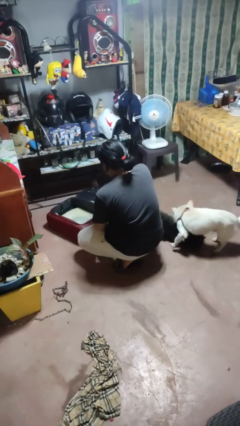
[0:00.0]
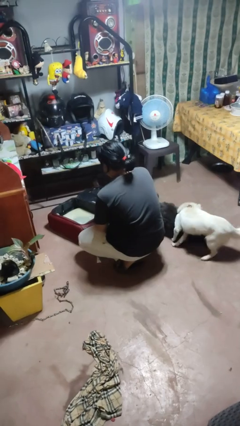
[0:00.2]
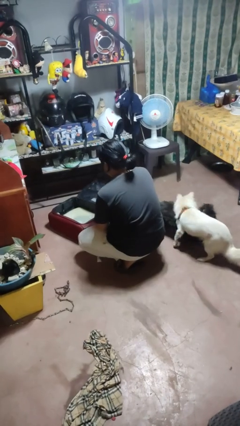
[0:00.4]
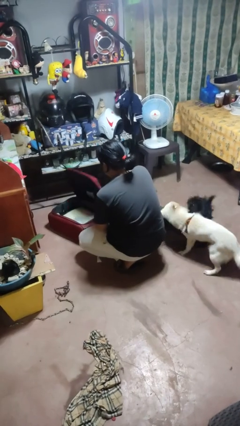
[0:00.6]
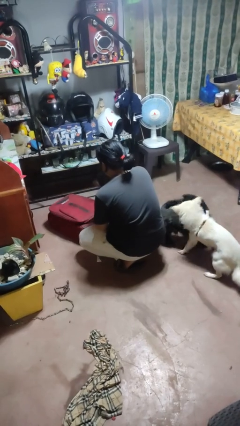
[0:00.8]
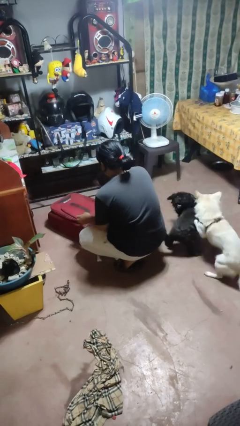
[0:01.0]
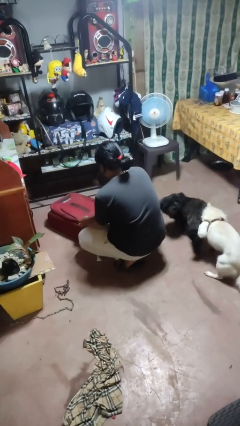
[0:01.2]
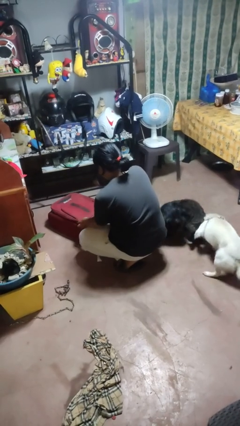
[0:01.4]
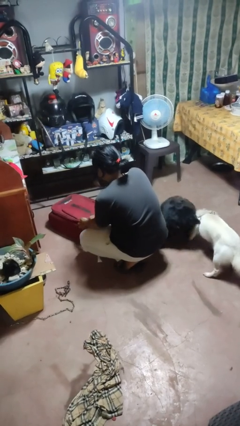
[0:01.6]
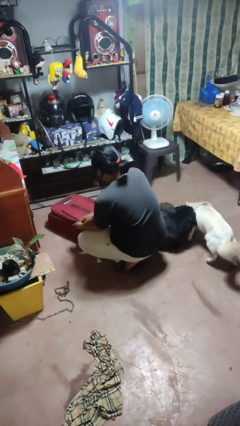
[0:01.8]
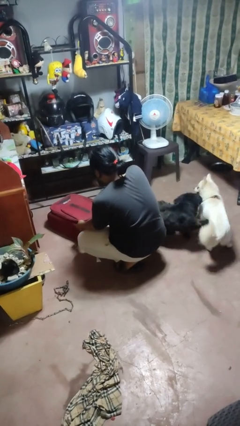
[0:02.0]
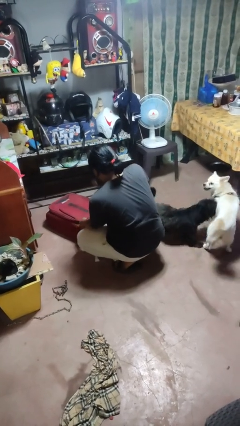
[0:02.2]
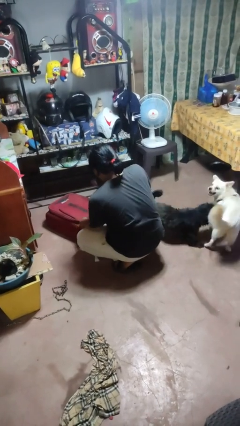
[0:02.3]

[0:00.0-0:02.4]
person closes suitcase

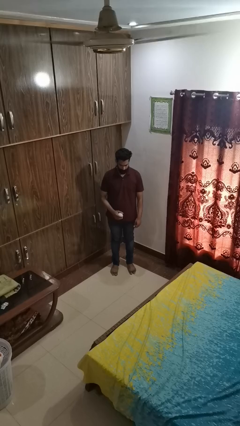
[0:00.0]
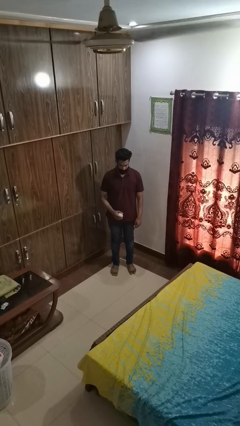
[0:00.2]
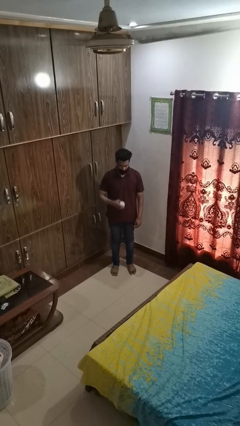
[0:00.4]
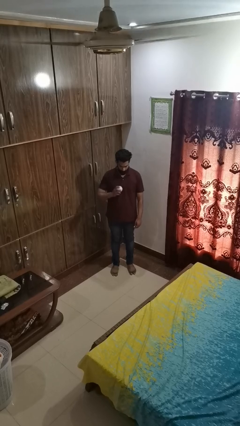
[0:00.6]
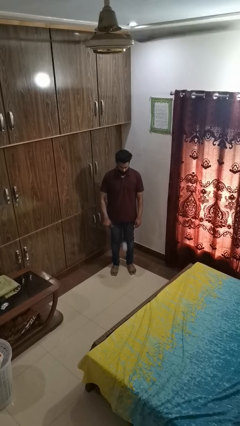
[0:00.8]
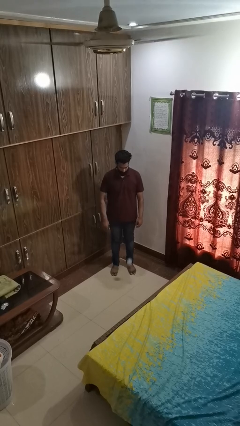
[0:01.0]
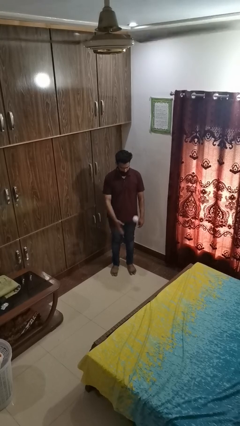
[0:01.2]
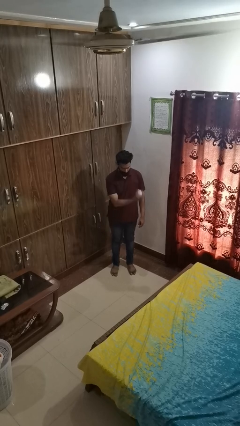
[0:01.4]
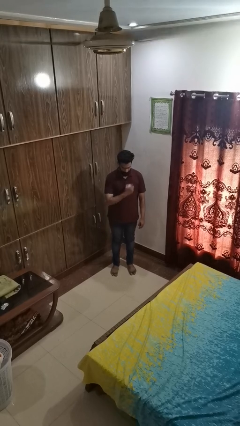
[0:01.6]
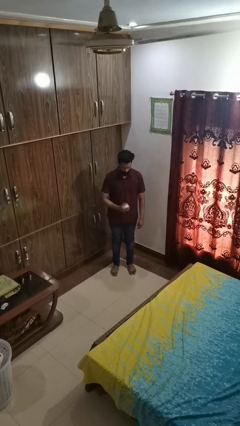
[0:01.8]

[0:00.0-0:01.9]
person bounces ball on floor

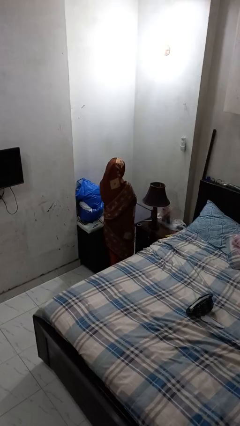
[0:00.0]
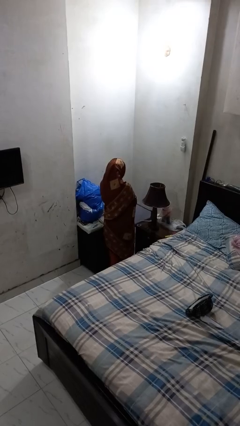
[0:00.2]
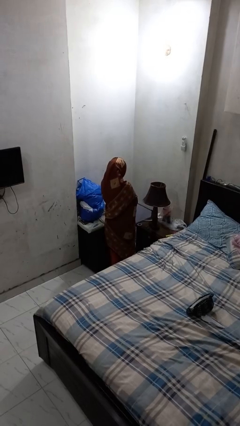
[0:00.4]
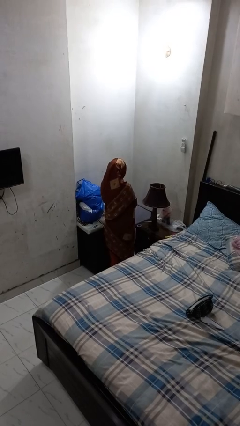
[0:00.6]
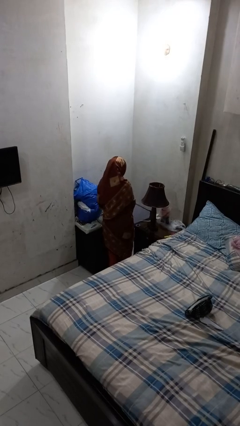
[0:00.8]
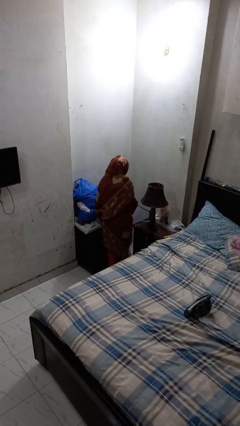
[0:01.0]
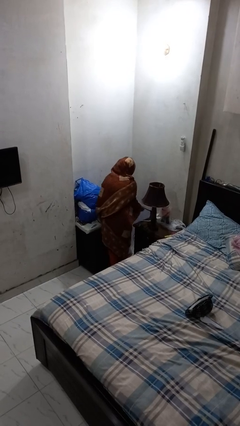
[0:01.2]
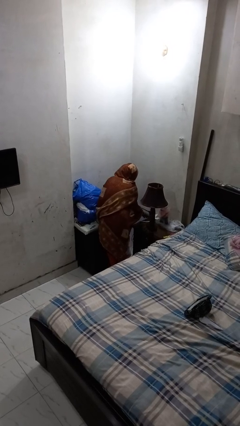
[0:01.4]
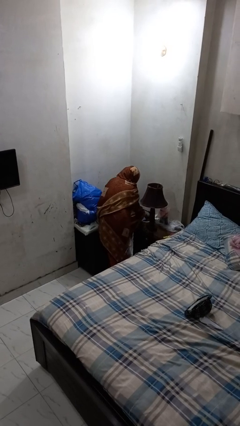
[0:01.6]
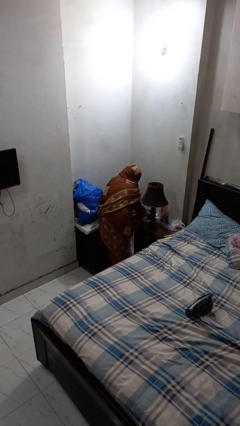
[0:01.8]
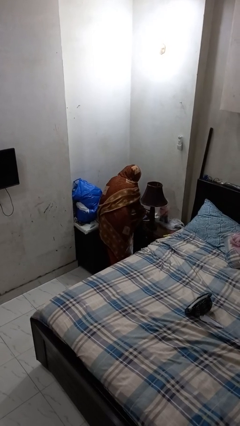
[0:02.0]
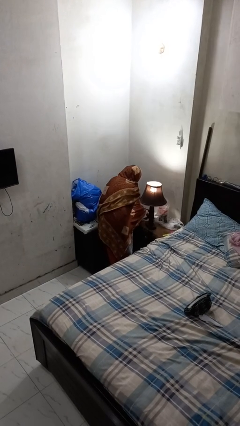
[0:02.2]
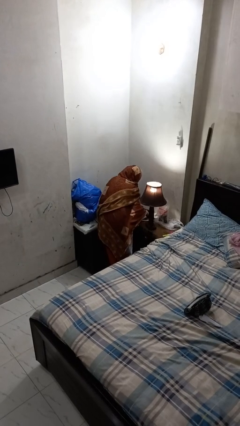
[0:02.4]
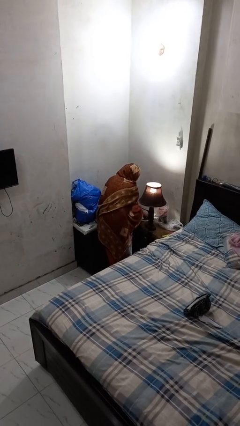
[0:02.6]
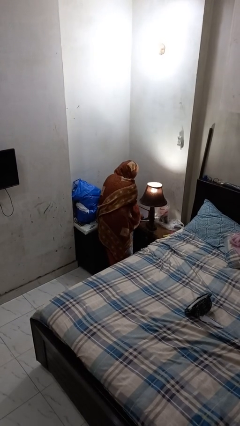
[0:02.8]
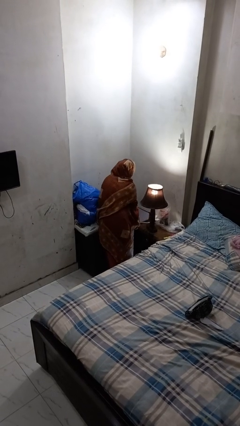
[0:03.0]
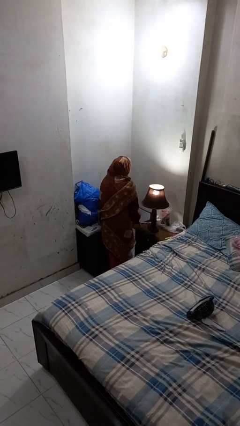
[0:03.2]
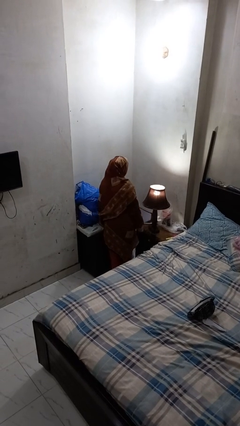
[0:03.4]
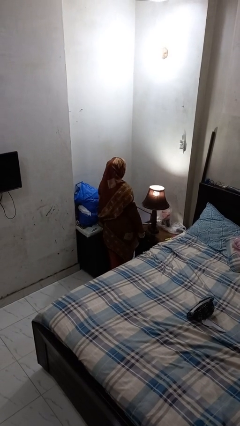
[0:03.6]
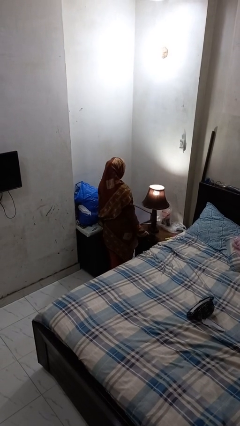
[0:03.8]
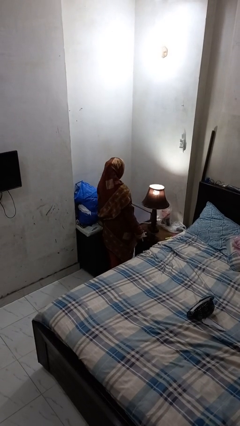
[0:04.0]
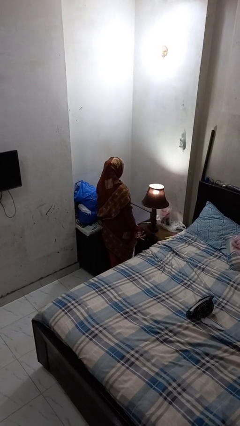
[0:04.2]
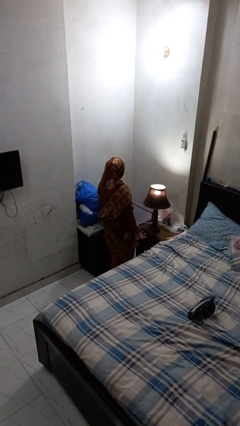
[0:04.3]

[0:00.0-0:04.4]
person turns on lamp

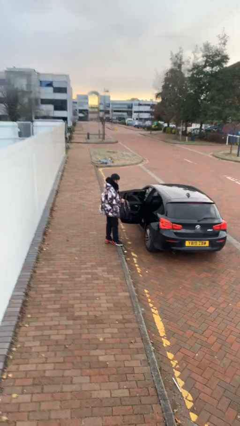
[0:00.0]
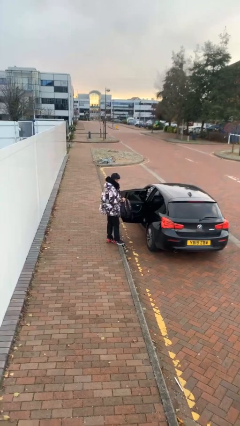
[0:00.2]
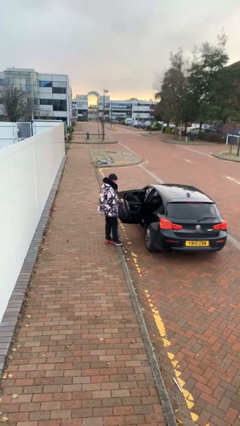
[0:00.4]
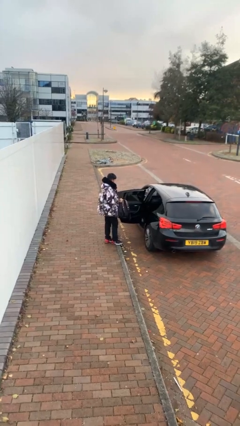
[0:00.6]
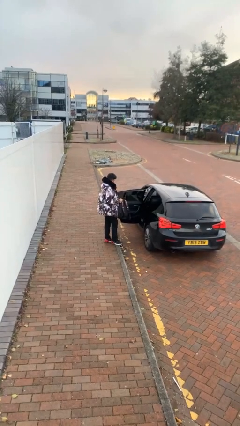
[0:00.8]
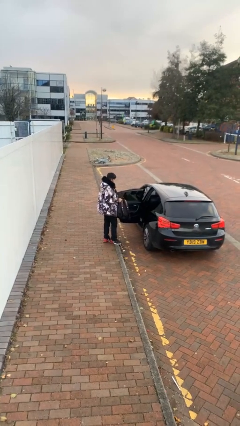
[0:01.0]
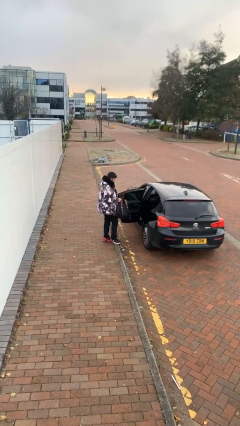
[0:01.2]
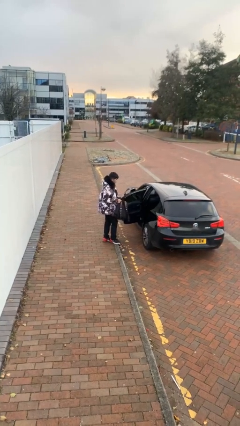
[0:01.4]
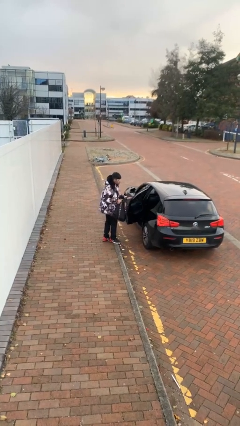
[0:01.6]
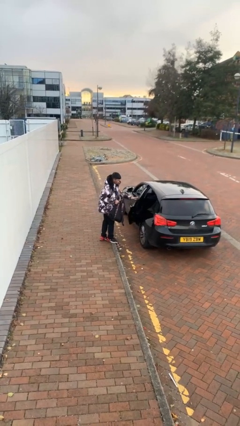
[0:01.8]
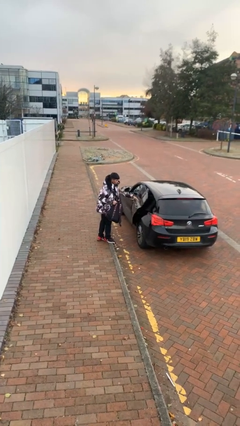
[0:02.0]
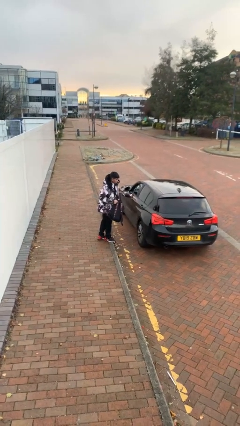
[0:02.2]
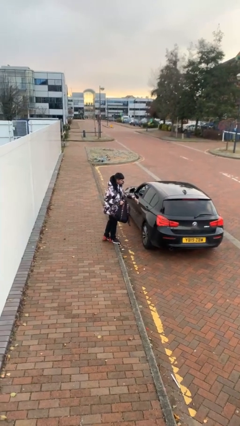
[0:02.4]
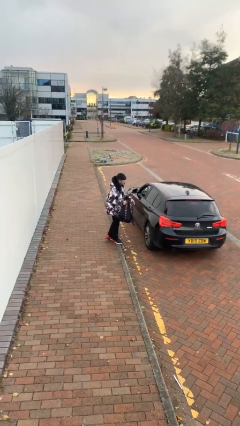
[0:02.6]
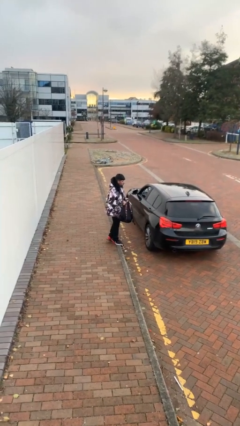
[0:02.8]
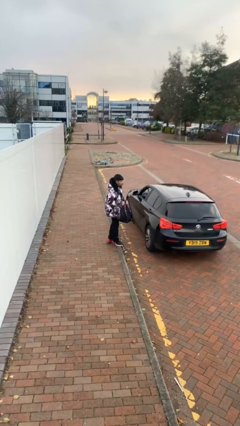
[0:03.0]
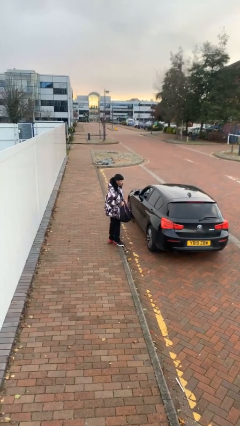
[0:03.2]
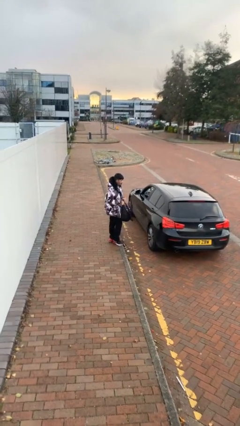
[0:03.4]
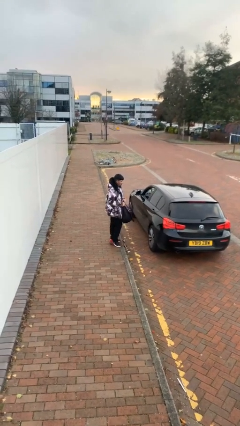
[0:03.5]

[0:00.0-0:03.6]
person closes car door

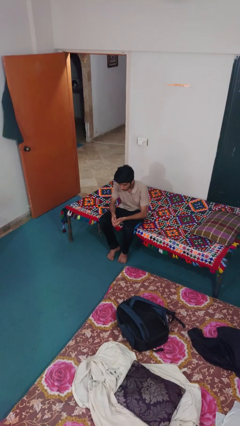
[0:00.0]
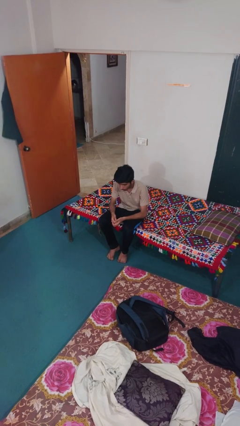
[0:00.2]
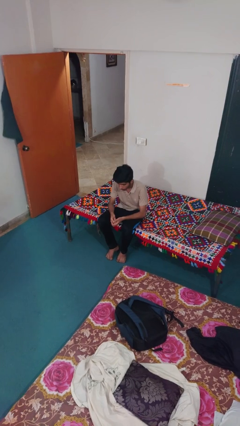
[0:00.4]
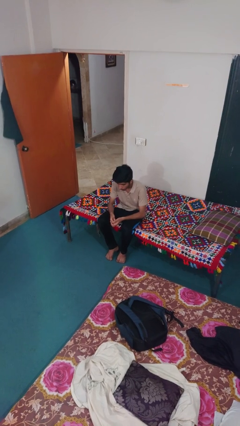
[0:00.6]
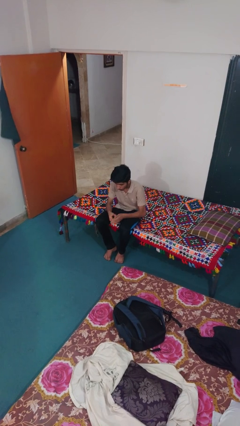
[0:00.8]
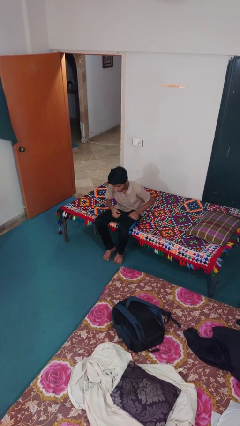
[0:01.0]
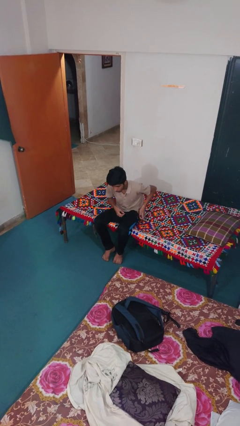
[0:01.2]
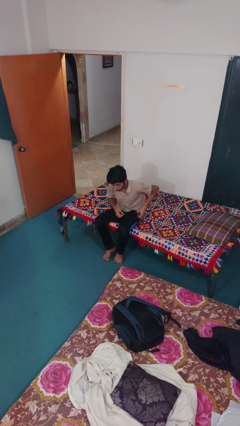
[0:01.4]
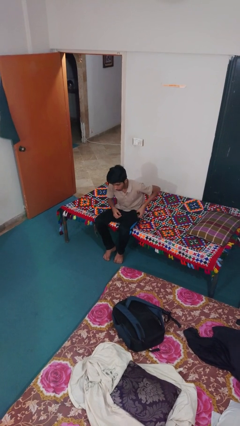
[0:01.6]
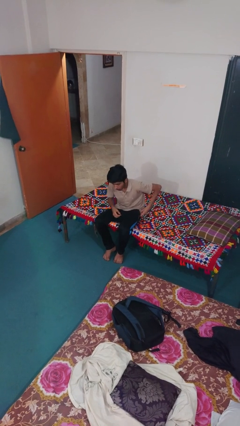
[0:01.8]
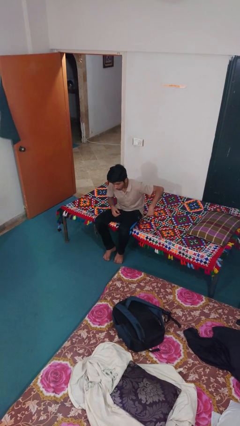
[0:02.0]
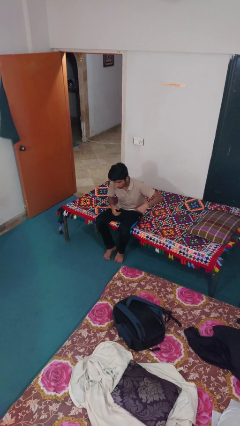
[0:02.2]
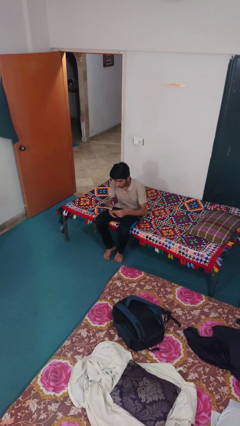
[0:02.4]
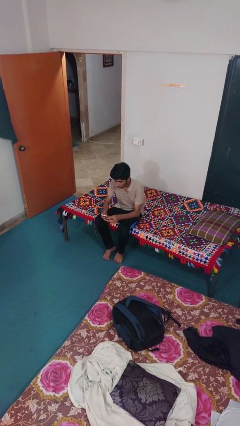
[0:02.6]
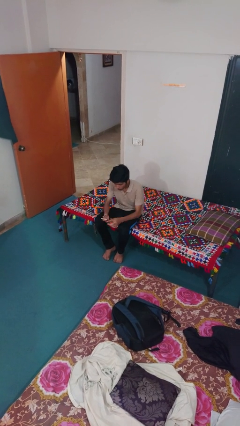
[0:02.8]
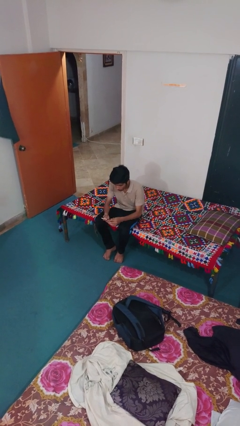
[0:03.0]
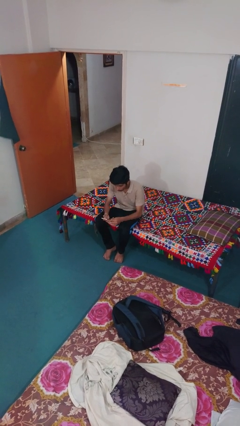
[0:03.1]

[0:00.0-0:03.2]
person takes phone from pocket

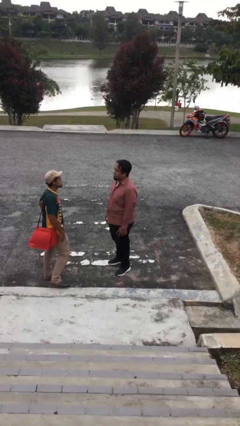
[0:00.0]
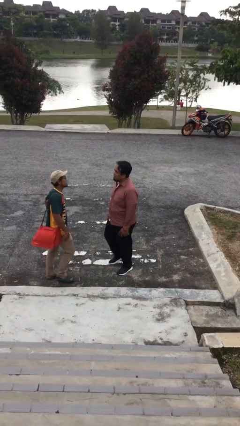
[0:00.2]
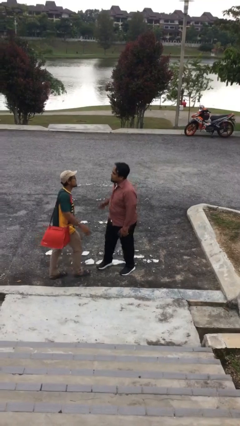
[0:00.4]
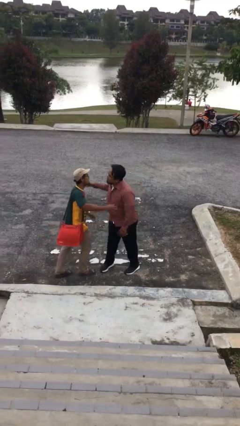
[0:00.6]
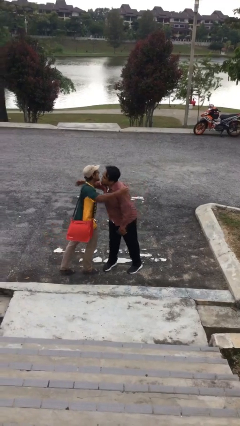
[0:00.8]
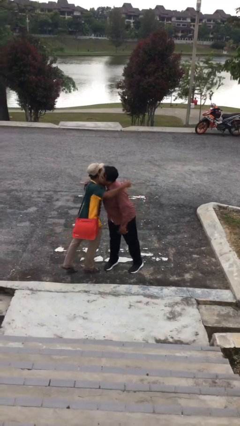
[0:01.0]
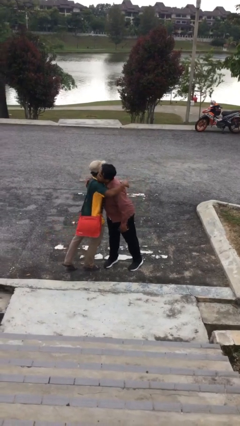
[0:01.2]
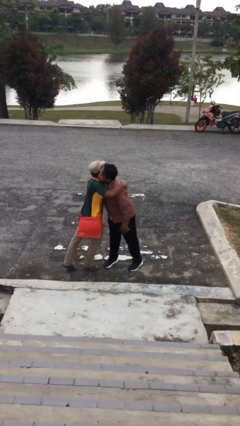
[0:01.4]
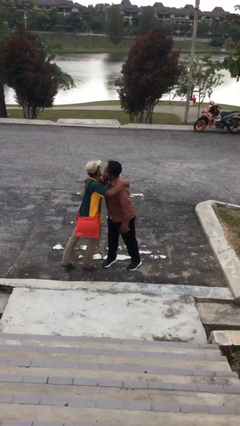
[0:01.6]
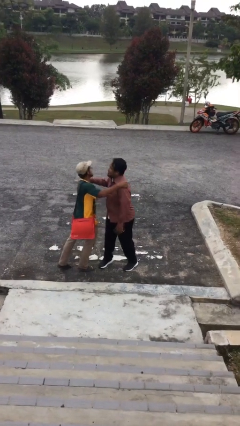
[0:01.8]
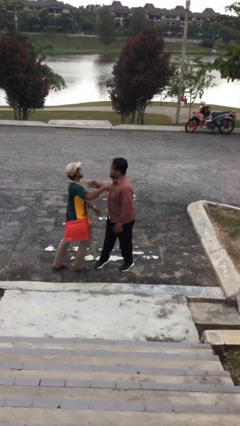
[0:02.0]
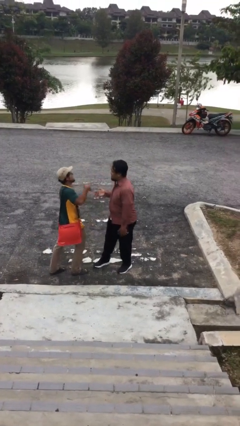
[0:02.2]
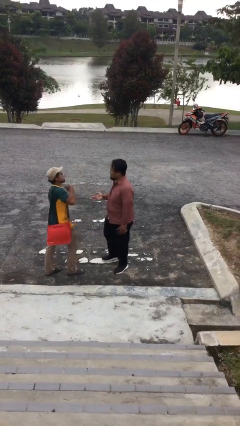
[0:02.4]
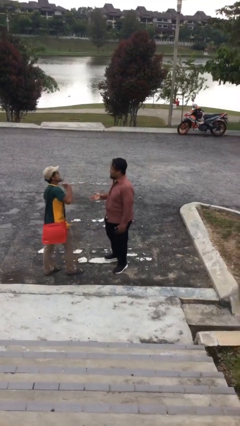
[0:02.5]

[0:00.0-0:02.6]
person embraces person
